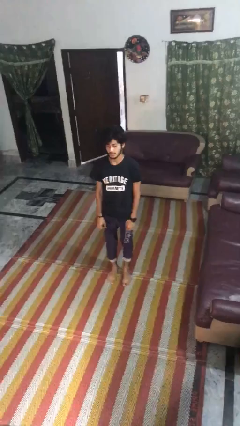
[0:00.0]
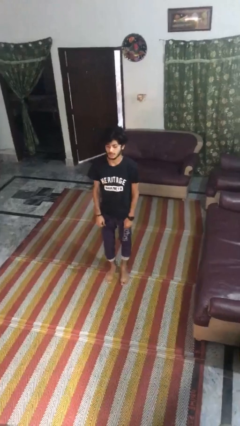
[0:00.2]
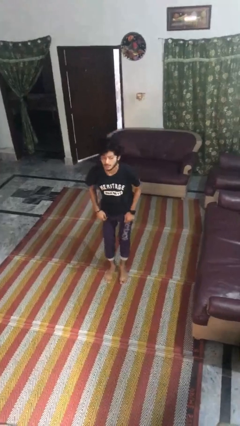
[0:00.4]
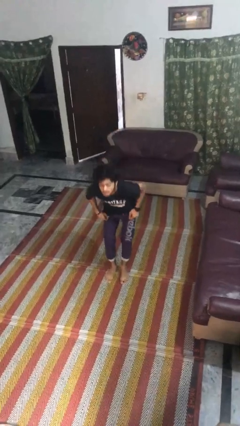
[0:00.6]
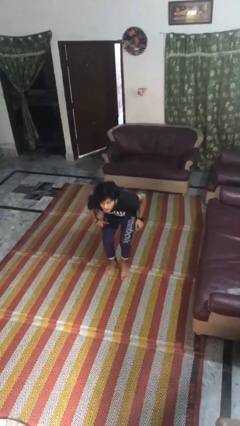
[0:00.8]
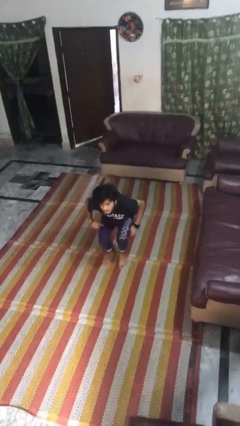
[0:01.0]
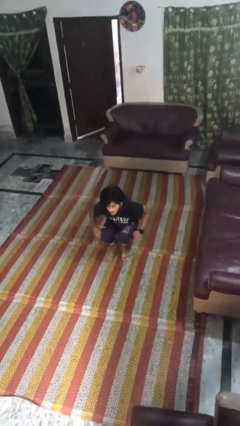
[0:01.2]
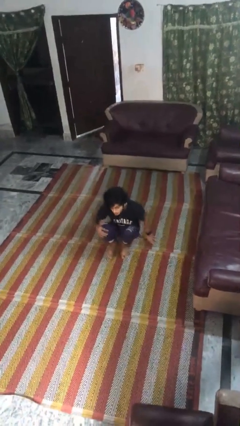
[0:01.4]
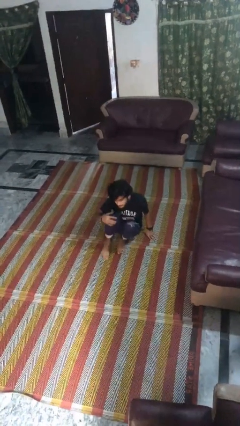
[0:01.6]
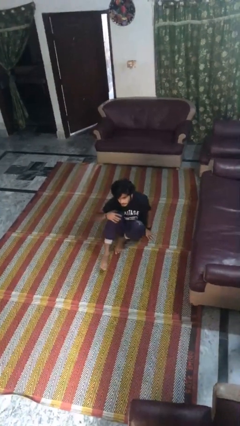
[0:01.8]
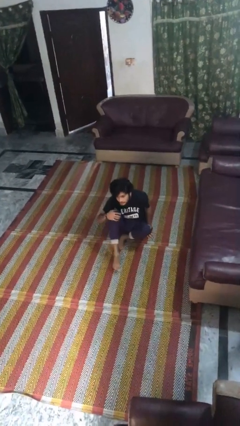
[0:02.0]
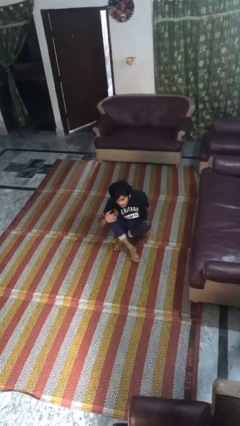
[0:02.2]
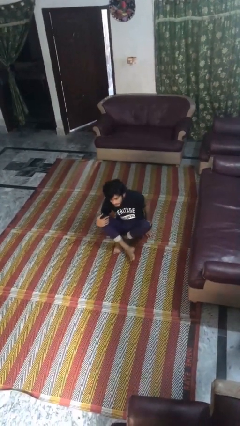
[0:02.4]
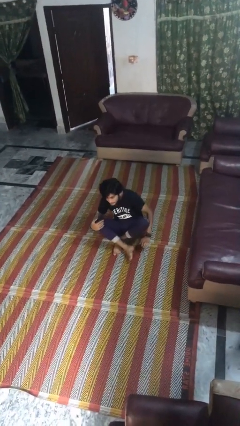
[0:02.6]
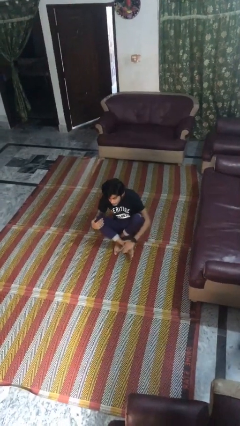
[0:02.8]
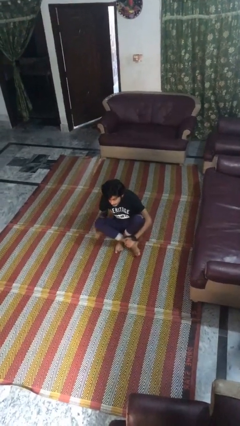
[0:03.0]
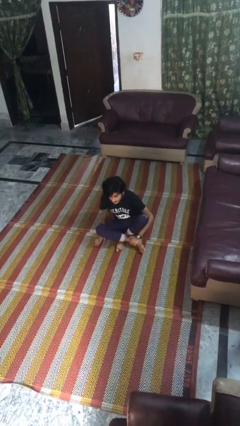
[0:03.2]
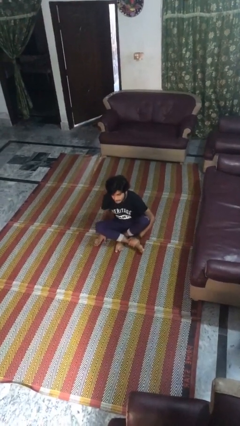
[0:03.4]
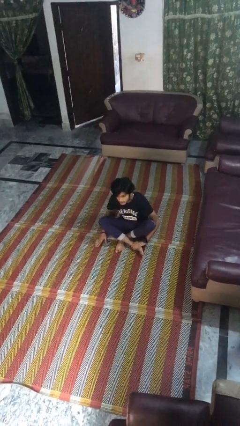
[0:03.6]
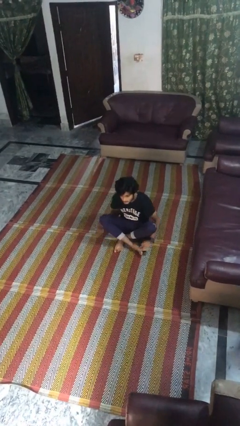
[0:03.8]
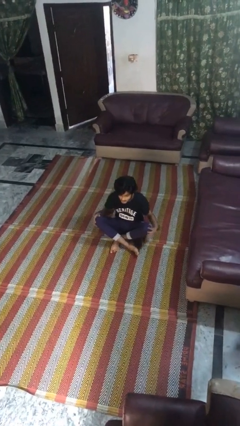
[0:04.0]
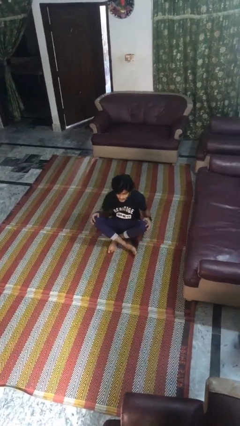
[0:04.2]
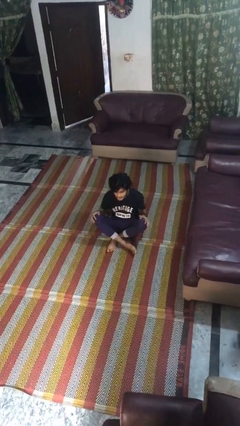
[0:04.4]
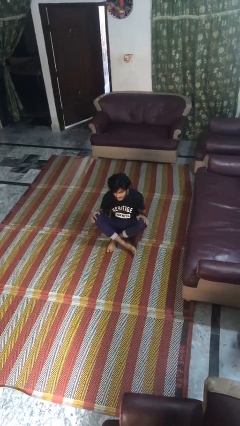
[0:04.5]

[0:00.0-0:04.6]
person sits crisscross

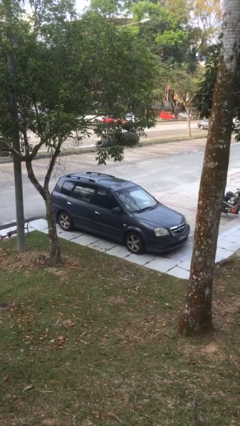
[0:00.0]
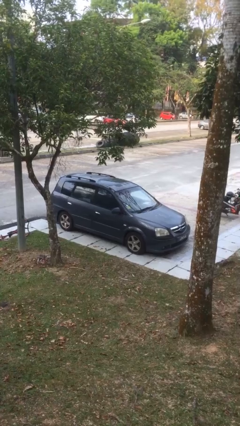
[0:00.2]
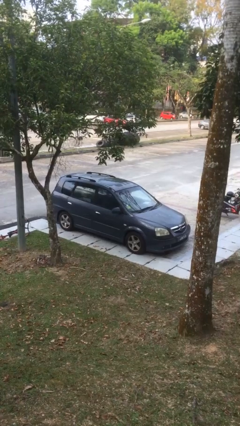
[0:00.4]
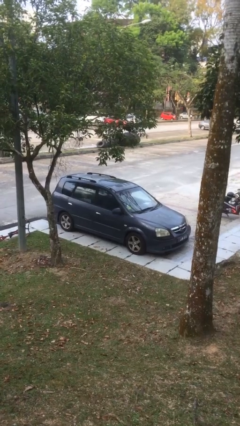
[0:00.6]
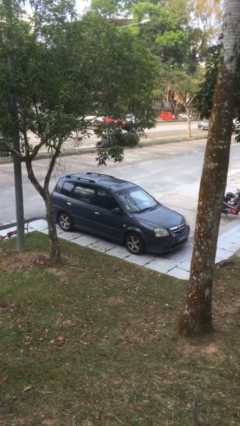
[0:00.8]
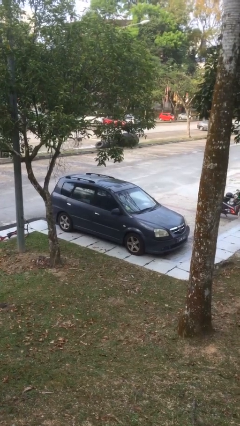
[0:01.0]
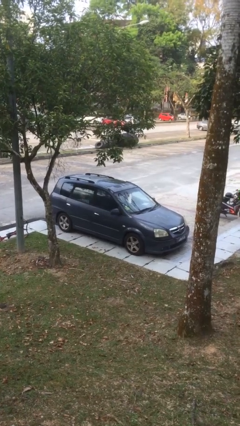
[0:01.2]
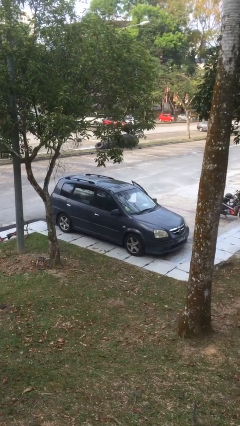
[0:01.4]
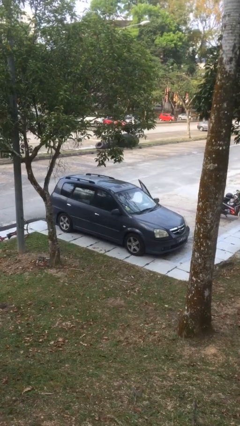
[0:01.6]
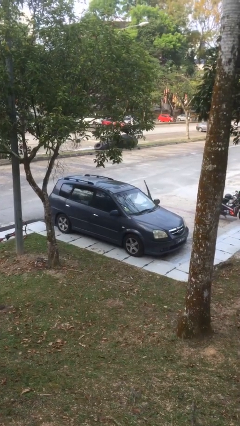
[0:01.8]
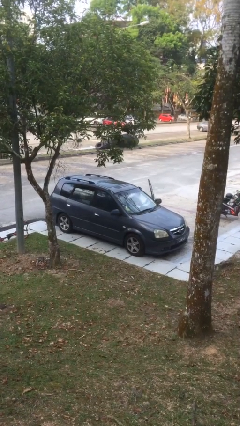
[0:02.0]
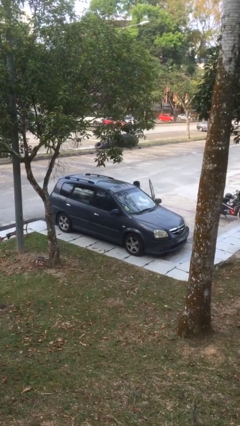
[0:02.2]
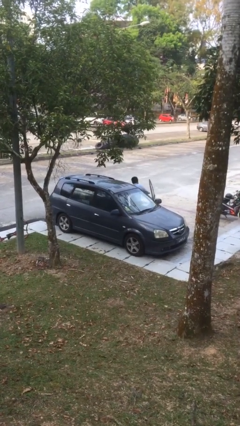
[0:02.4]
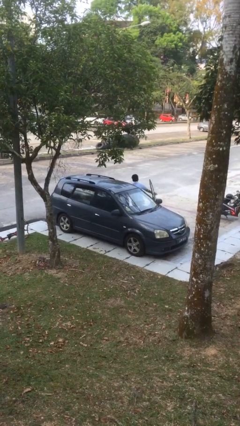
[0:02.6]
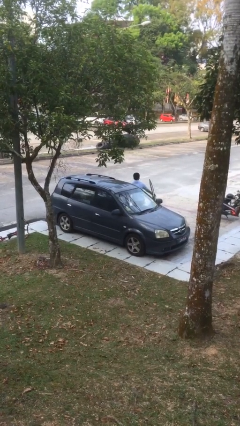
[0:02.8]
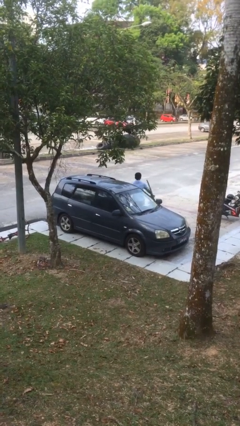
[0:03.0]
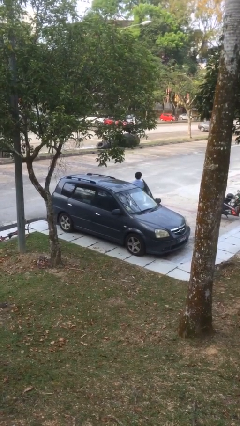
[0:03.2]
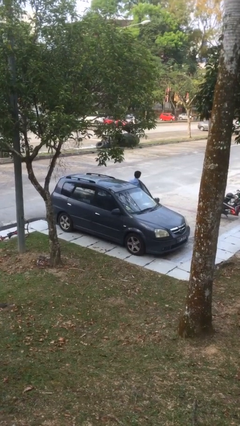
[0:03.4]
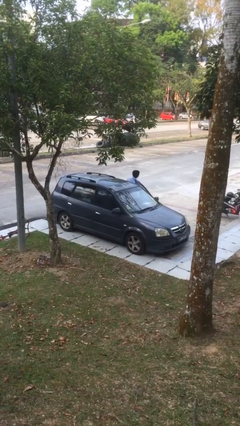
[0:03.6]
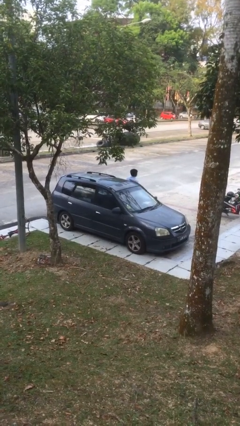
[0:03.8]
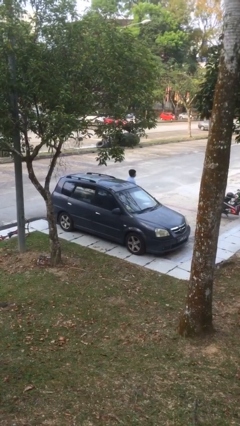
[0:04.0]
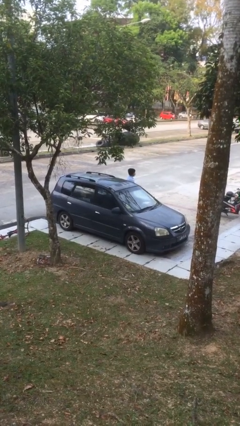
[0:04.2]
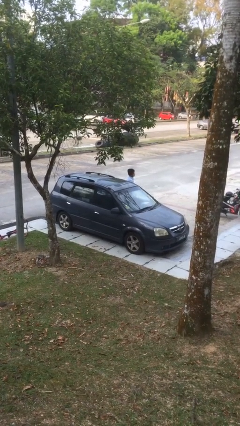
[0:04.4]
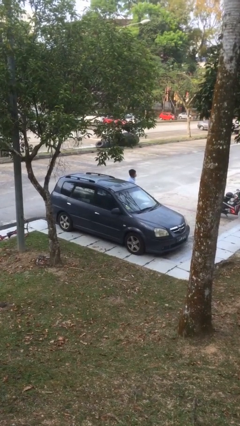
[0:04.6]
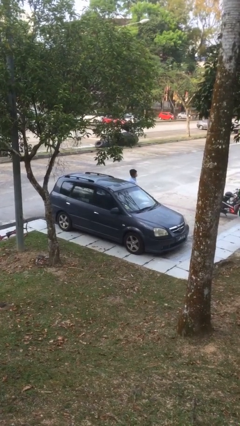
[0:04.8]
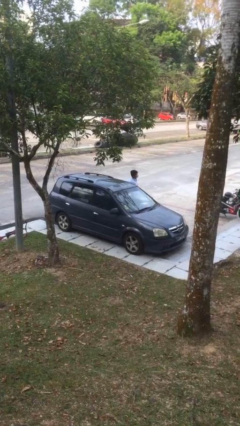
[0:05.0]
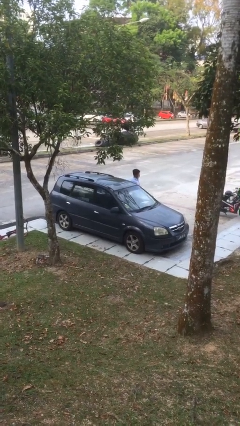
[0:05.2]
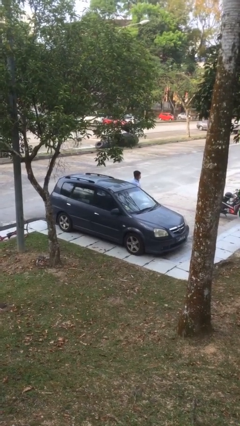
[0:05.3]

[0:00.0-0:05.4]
car drops off person

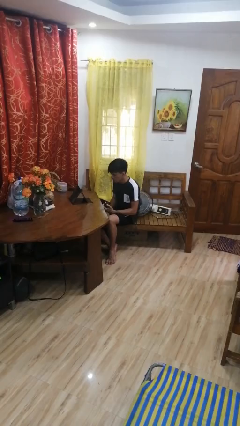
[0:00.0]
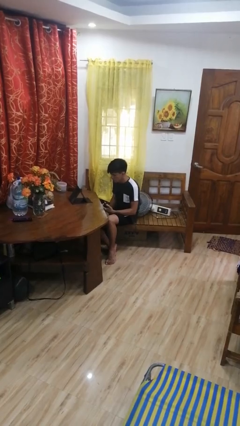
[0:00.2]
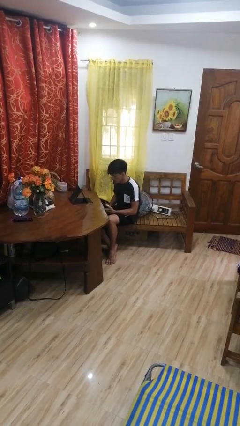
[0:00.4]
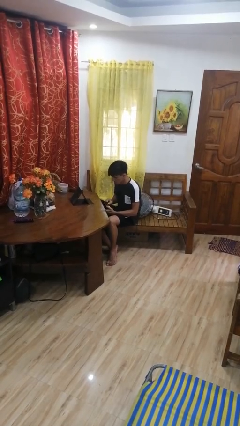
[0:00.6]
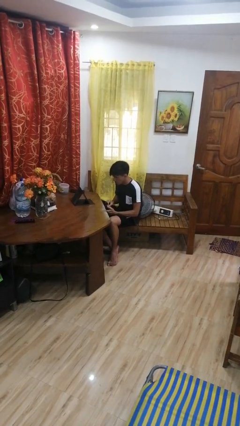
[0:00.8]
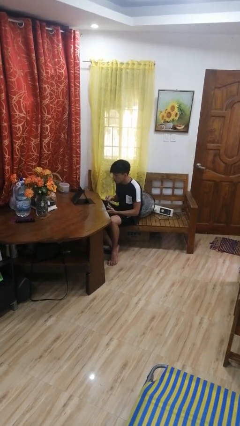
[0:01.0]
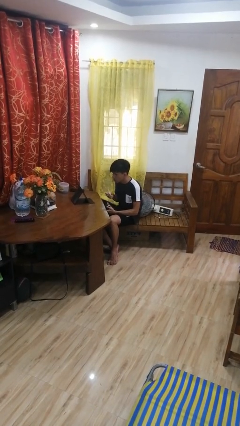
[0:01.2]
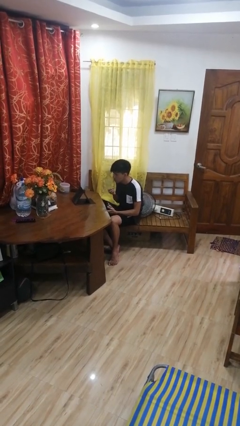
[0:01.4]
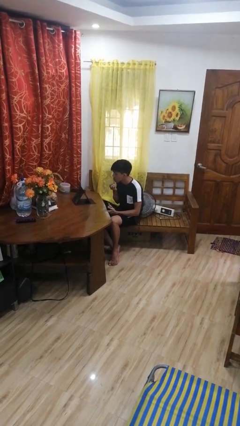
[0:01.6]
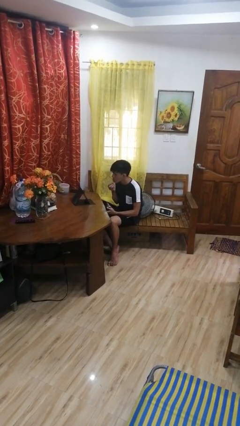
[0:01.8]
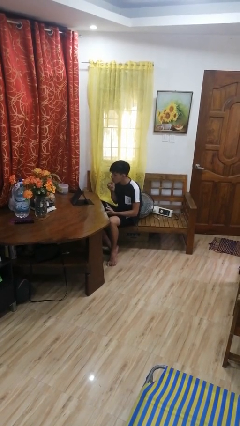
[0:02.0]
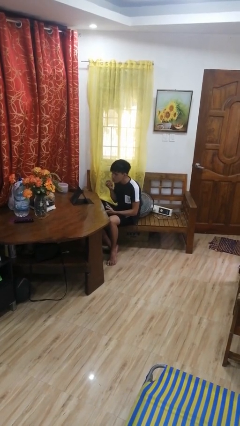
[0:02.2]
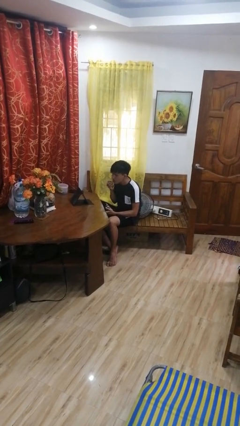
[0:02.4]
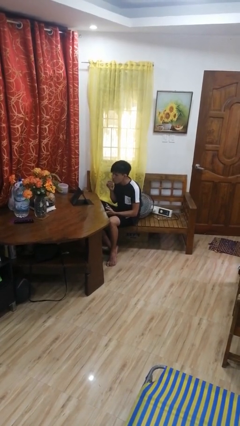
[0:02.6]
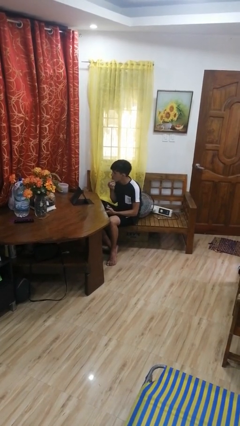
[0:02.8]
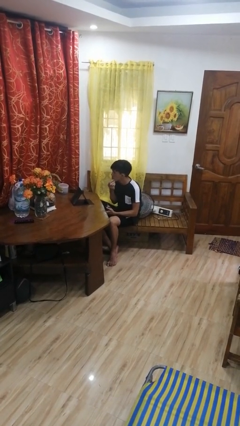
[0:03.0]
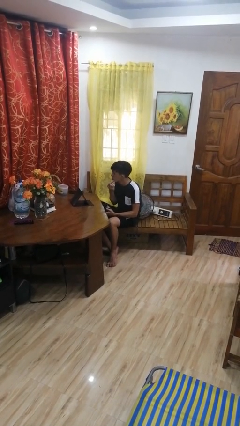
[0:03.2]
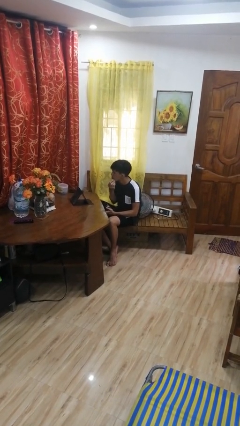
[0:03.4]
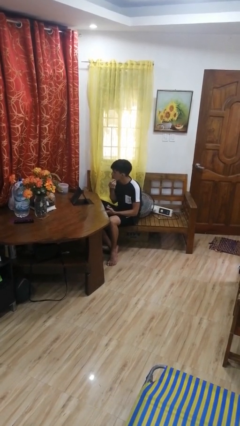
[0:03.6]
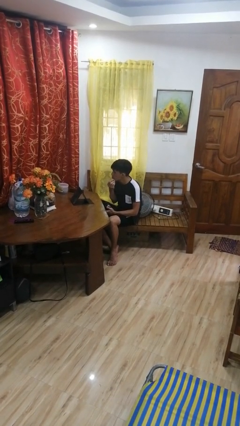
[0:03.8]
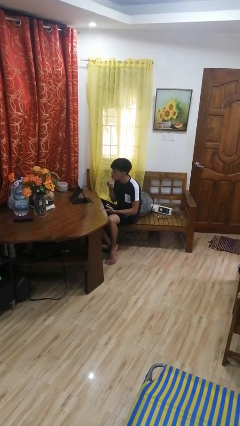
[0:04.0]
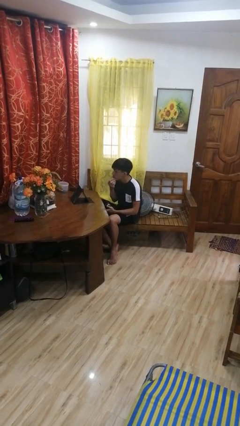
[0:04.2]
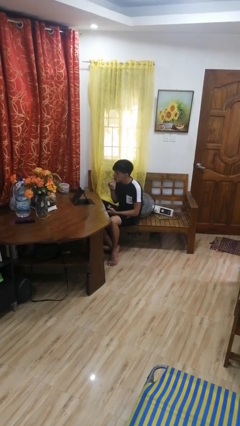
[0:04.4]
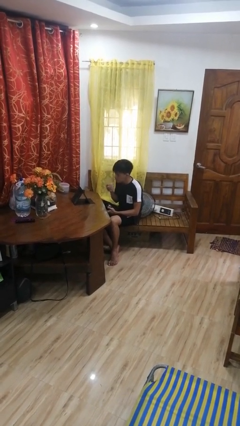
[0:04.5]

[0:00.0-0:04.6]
person applies eye makeup

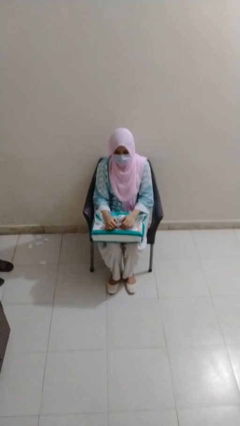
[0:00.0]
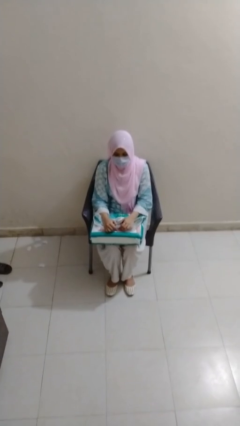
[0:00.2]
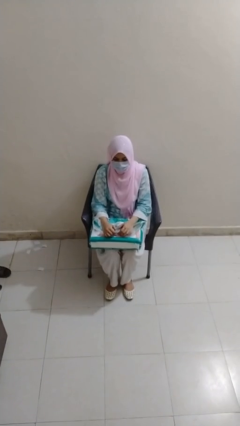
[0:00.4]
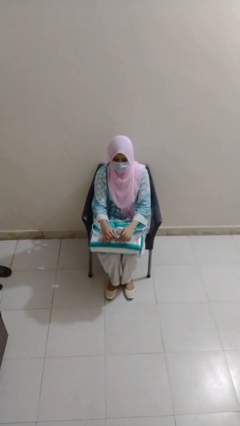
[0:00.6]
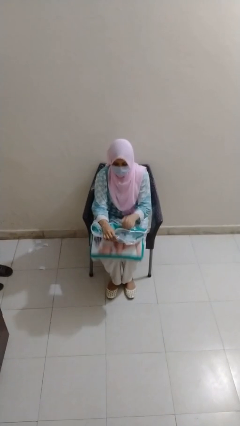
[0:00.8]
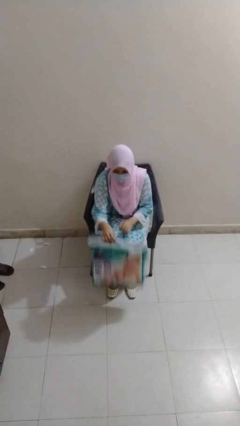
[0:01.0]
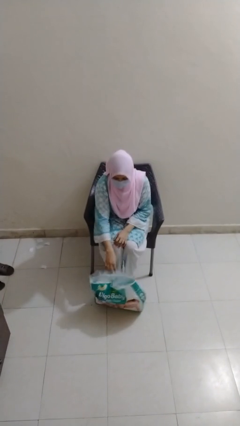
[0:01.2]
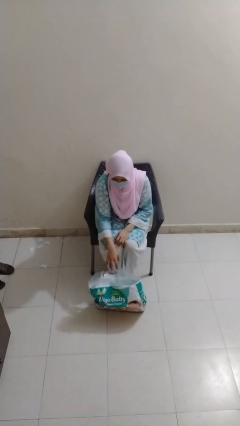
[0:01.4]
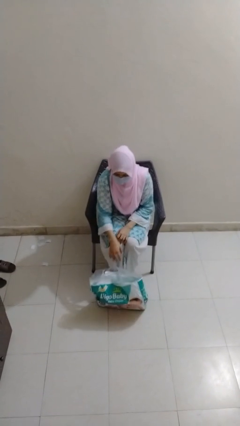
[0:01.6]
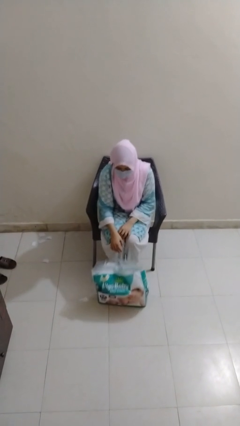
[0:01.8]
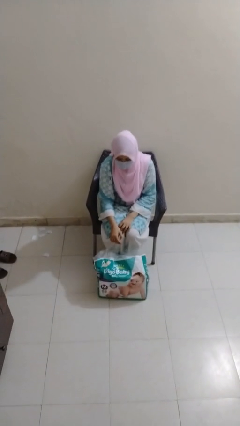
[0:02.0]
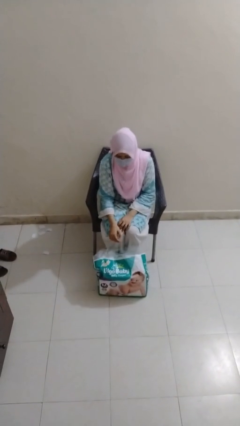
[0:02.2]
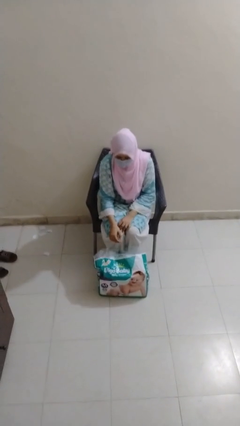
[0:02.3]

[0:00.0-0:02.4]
person drops object

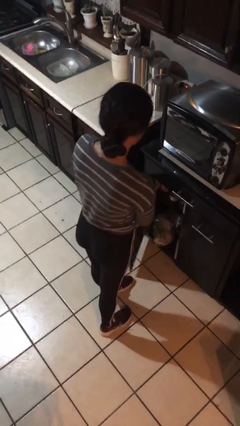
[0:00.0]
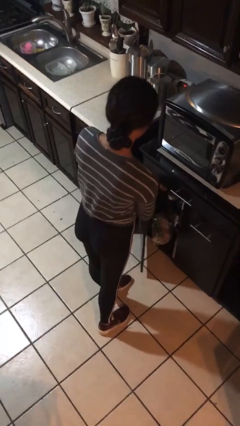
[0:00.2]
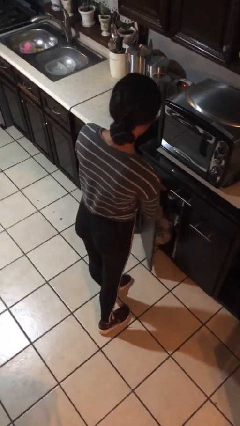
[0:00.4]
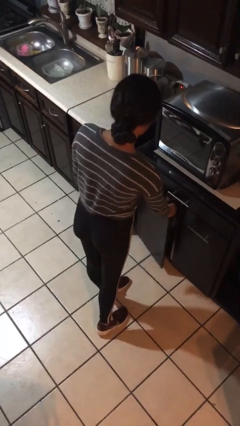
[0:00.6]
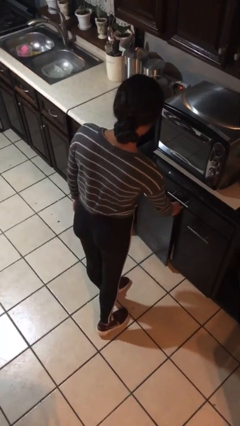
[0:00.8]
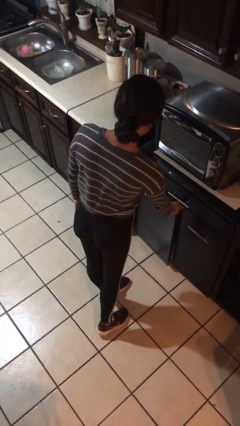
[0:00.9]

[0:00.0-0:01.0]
person closes cabinet
